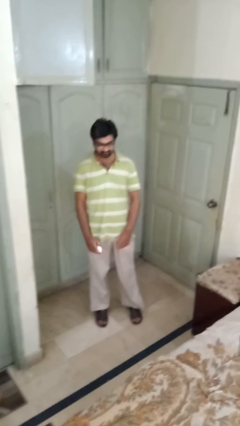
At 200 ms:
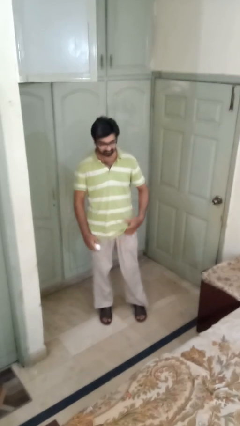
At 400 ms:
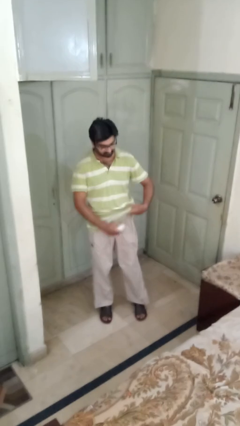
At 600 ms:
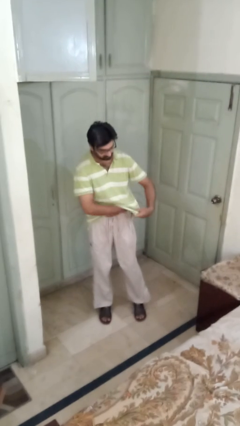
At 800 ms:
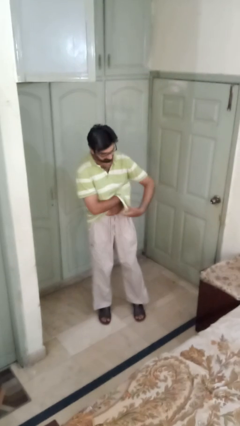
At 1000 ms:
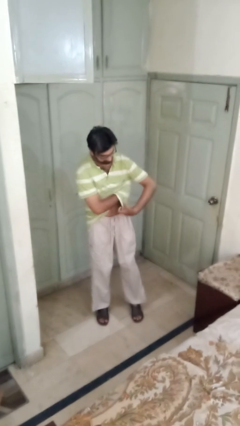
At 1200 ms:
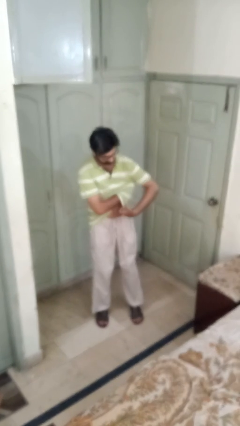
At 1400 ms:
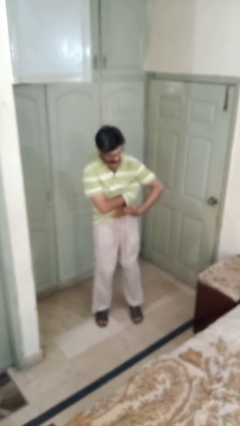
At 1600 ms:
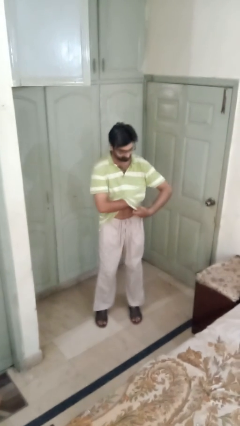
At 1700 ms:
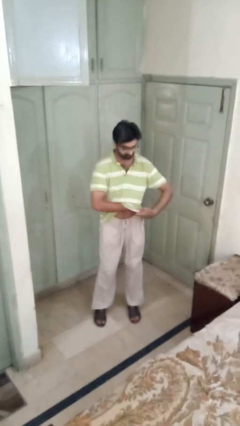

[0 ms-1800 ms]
person applies deodorant

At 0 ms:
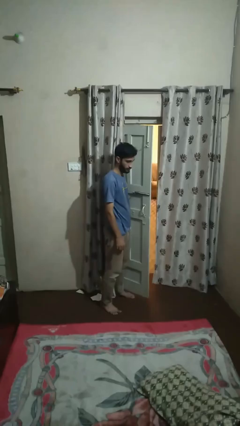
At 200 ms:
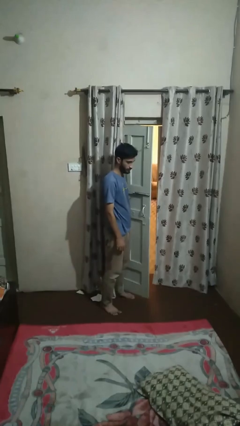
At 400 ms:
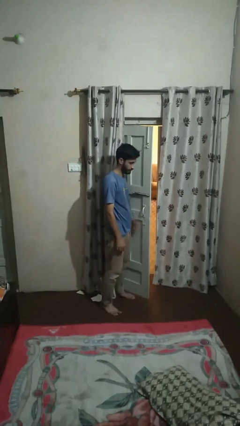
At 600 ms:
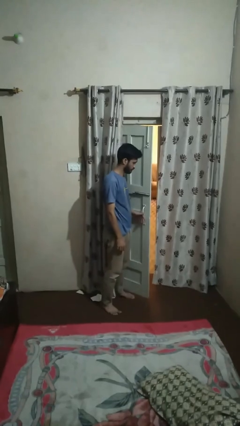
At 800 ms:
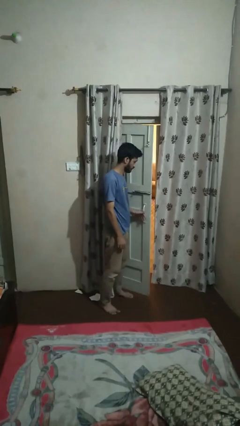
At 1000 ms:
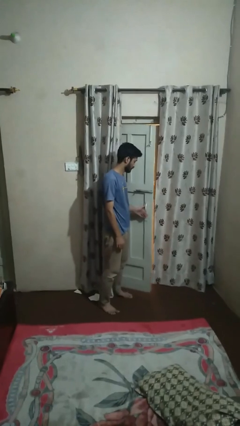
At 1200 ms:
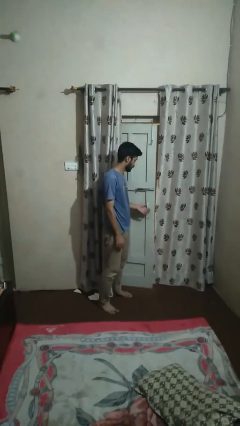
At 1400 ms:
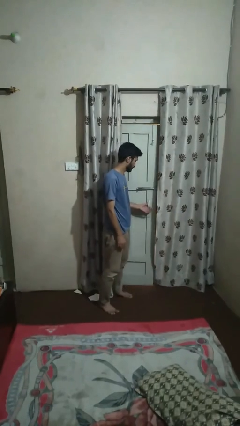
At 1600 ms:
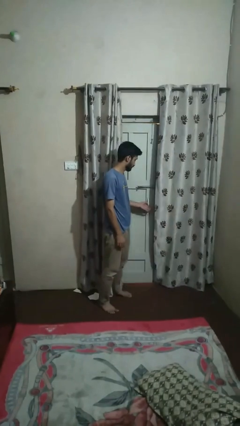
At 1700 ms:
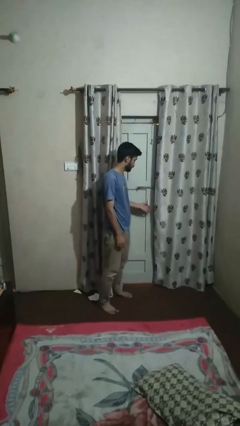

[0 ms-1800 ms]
person closes facility door

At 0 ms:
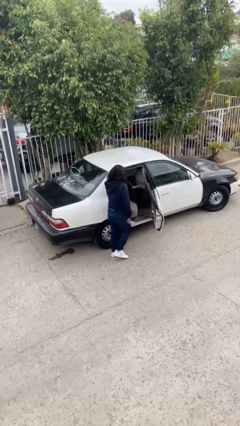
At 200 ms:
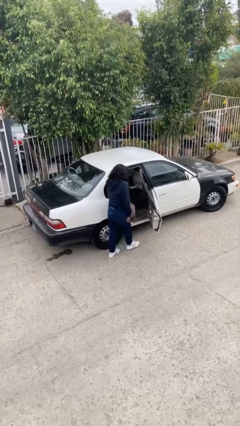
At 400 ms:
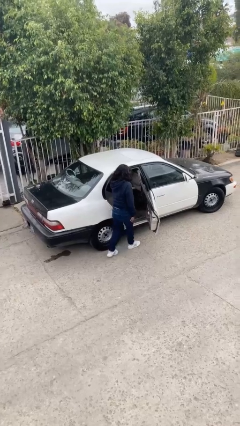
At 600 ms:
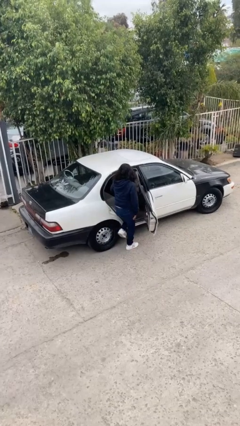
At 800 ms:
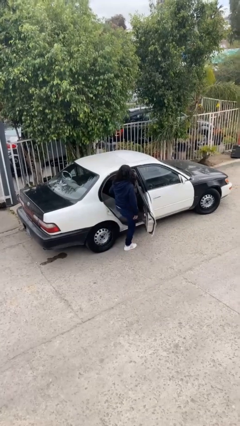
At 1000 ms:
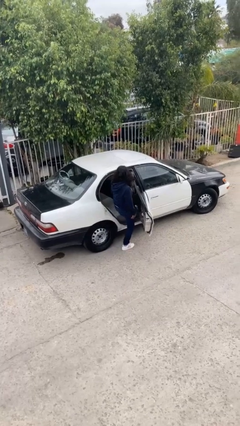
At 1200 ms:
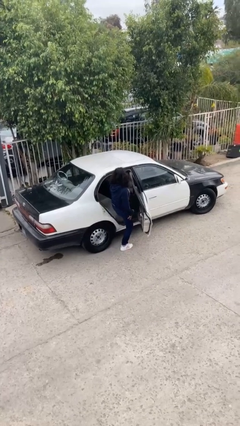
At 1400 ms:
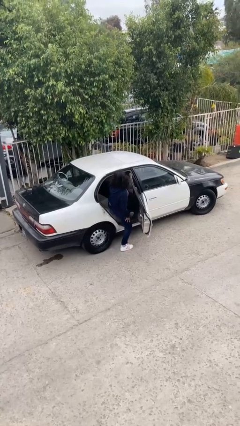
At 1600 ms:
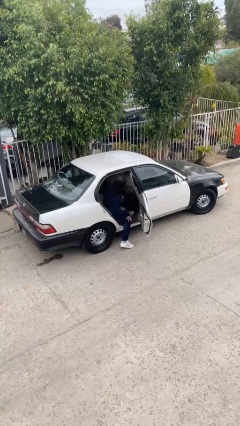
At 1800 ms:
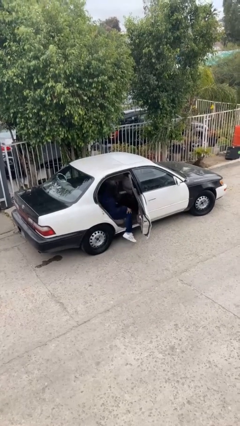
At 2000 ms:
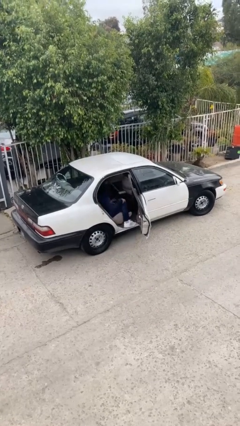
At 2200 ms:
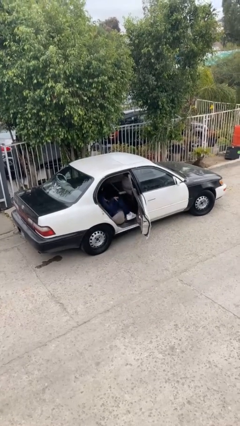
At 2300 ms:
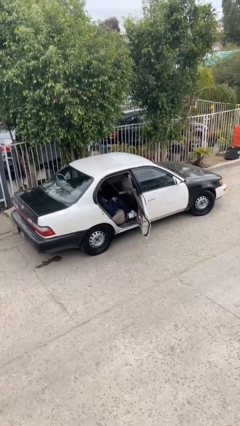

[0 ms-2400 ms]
person enters car

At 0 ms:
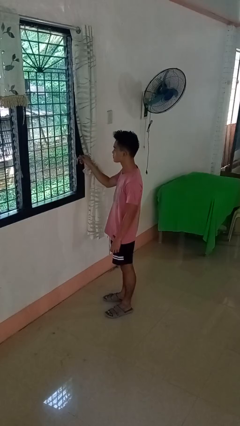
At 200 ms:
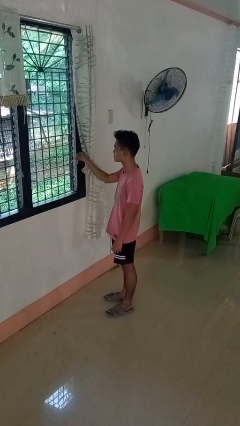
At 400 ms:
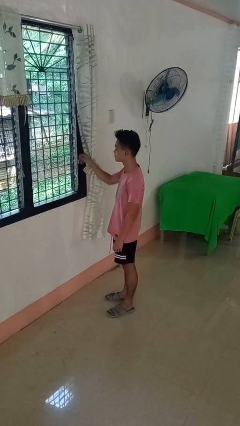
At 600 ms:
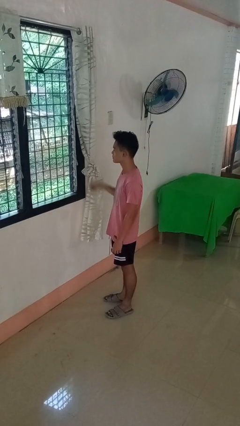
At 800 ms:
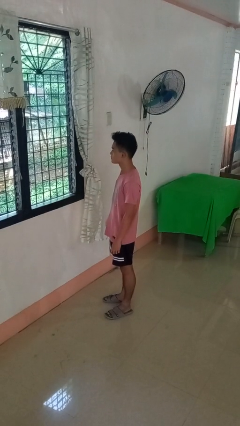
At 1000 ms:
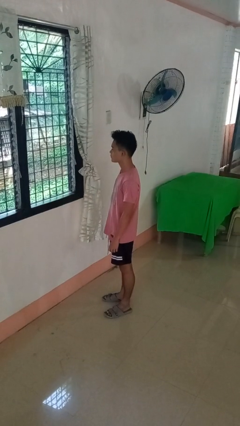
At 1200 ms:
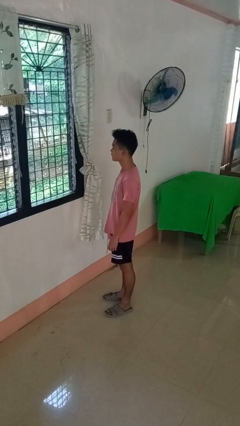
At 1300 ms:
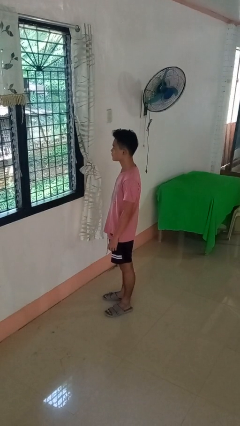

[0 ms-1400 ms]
person closes home window

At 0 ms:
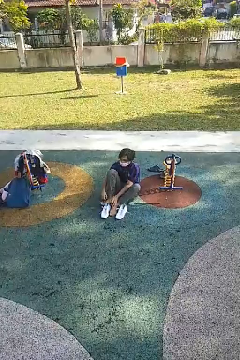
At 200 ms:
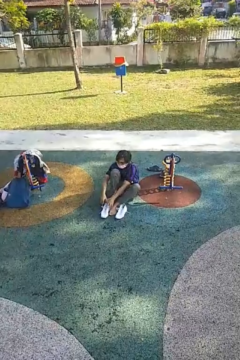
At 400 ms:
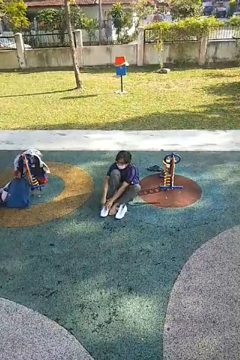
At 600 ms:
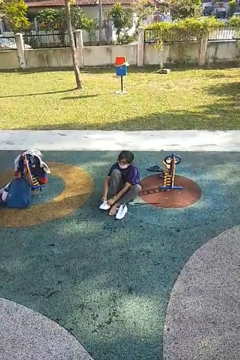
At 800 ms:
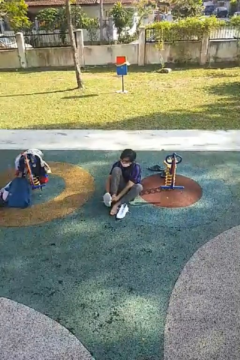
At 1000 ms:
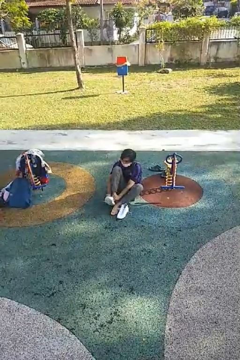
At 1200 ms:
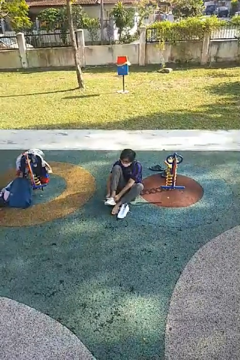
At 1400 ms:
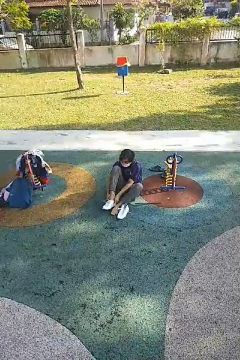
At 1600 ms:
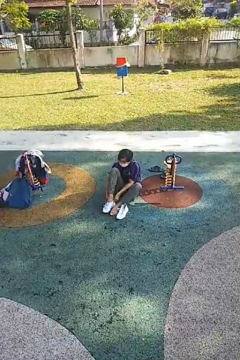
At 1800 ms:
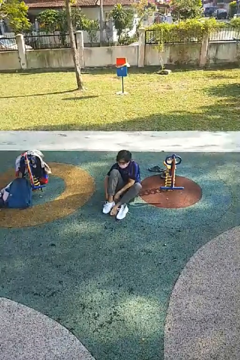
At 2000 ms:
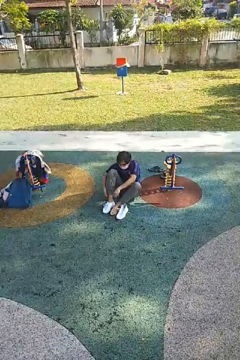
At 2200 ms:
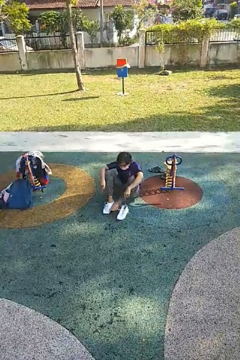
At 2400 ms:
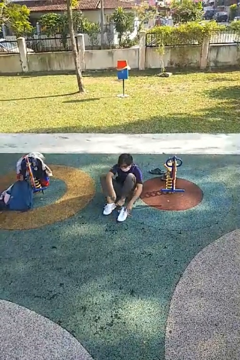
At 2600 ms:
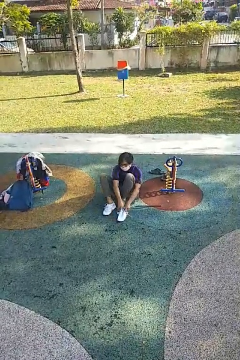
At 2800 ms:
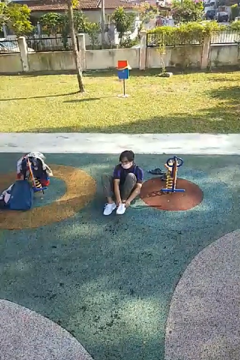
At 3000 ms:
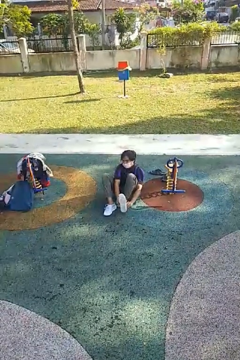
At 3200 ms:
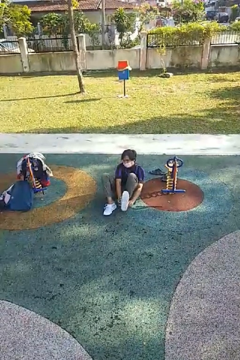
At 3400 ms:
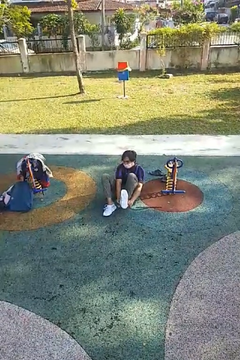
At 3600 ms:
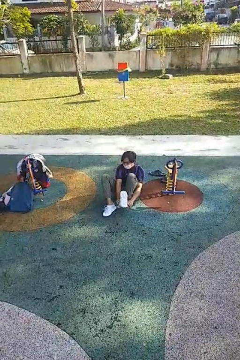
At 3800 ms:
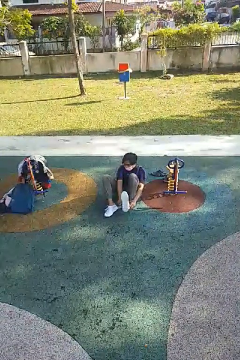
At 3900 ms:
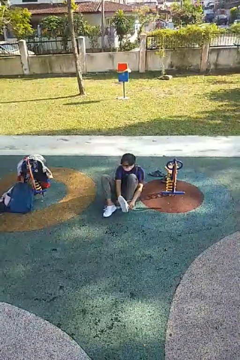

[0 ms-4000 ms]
person puts on shoes

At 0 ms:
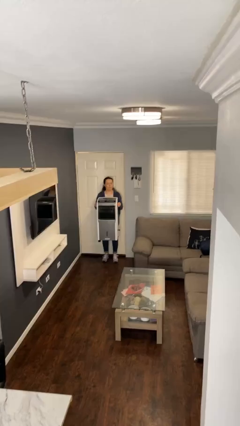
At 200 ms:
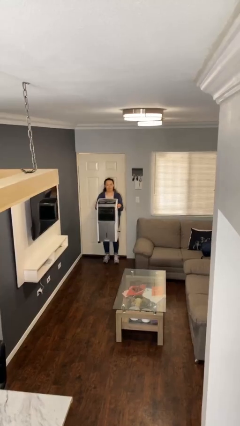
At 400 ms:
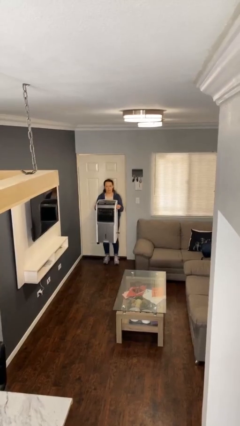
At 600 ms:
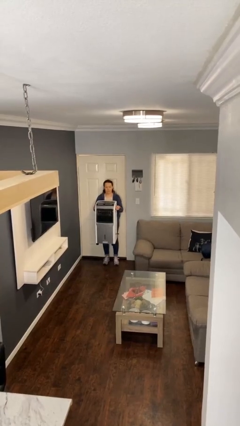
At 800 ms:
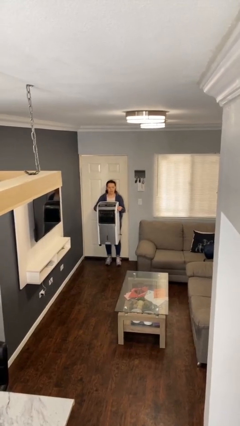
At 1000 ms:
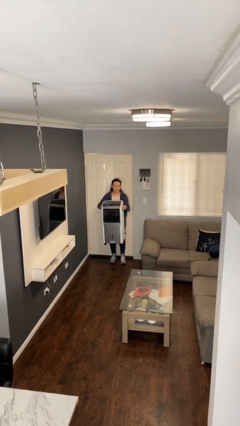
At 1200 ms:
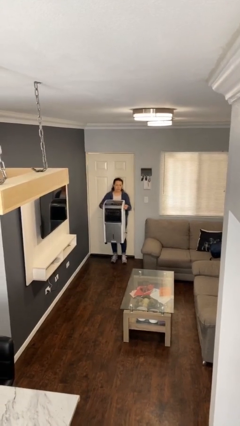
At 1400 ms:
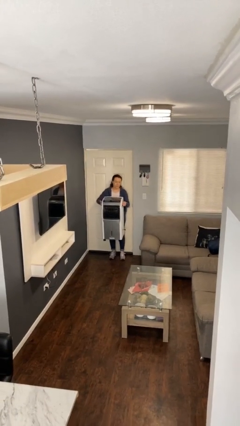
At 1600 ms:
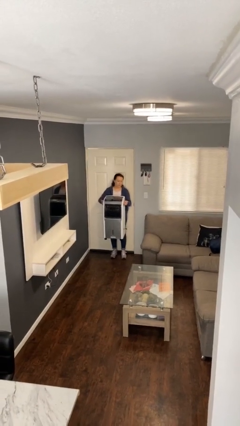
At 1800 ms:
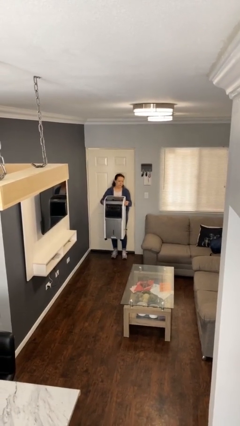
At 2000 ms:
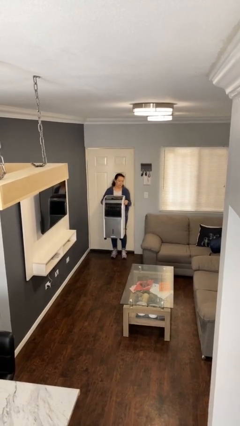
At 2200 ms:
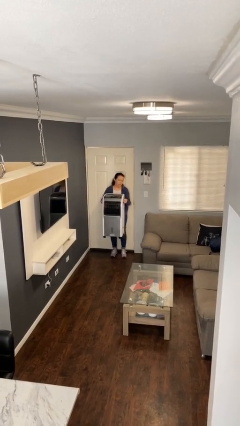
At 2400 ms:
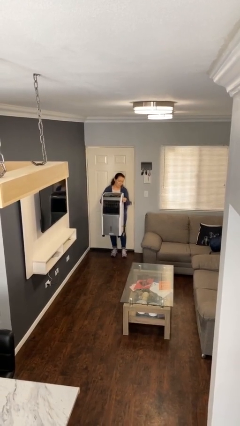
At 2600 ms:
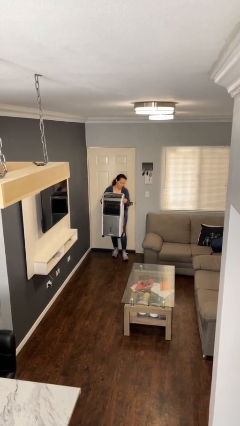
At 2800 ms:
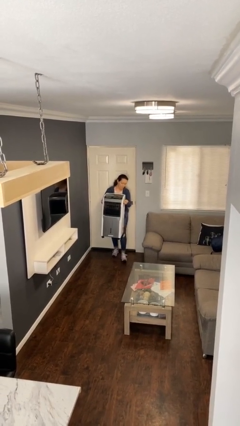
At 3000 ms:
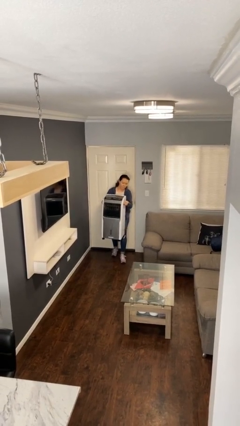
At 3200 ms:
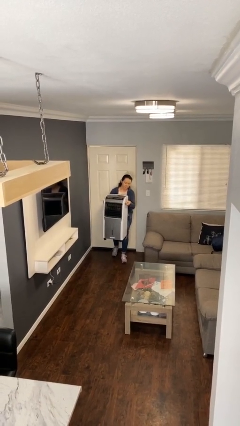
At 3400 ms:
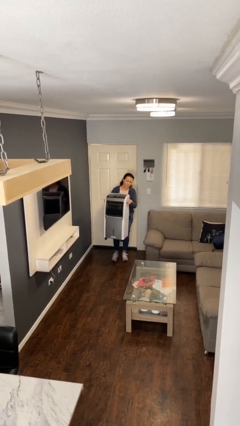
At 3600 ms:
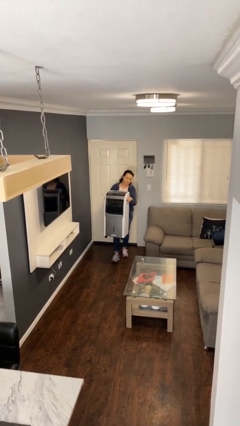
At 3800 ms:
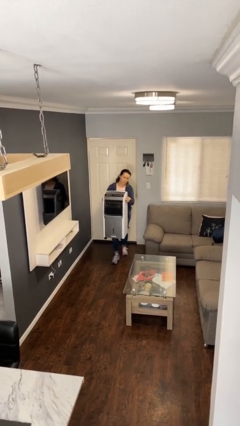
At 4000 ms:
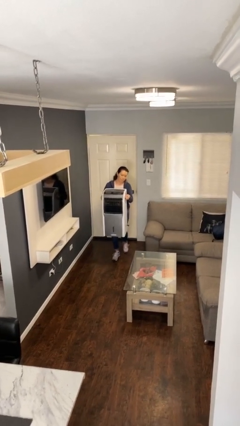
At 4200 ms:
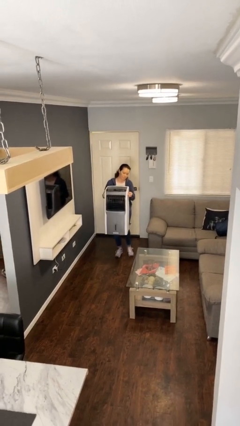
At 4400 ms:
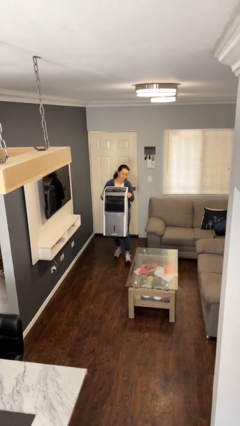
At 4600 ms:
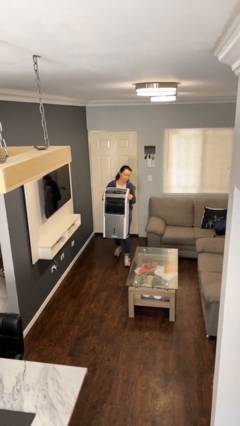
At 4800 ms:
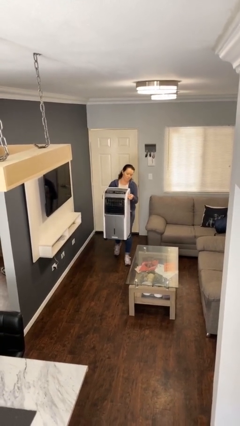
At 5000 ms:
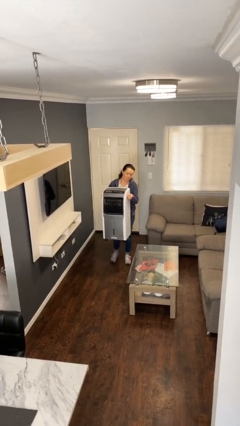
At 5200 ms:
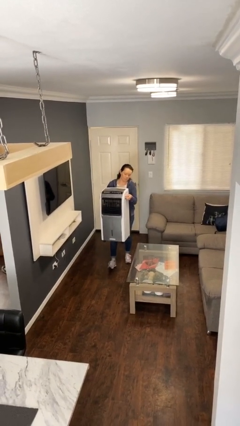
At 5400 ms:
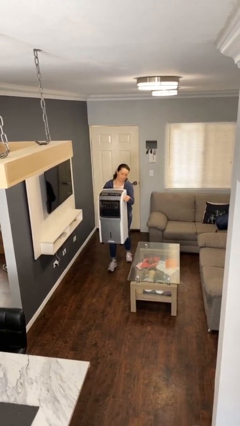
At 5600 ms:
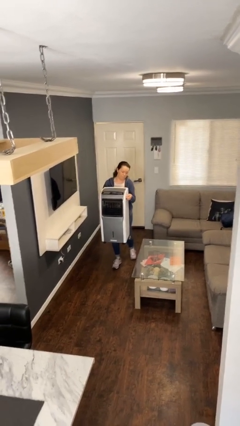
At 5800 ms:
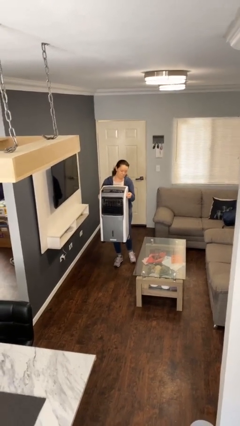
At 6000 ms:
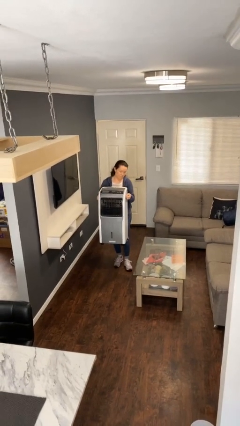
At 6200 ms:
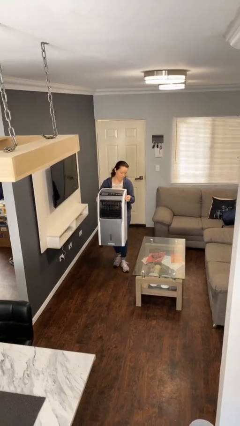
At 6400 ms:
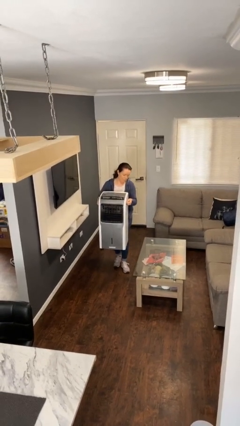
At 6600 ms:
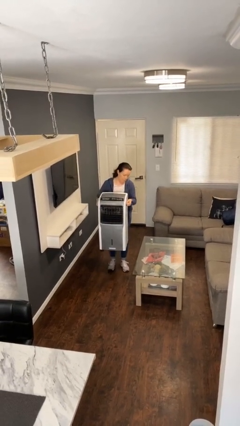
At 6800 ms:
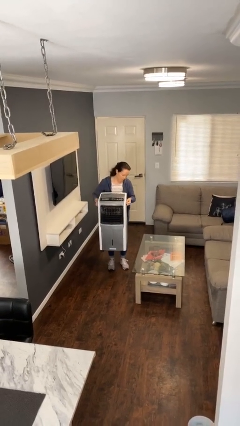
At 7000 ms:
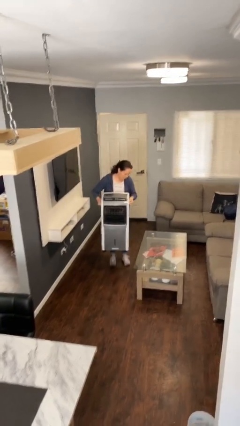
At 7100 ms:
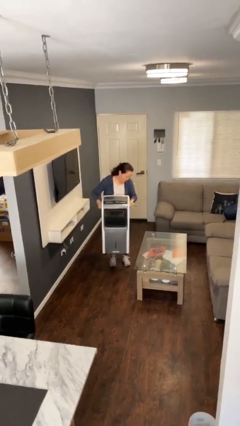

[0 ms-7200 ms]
person carries heavy object
